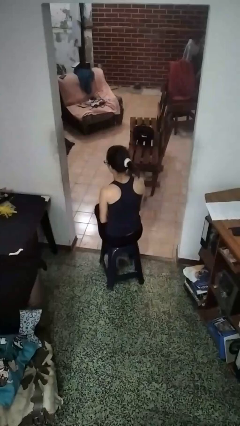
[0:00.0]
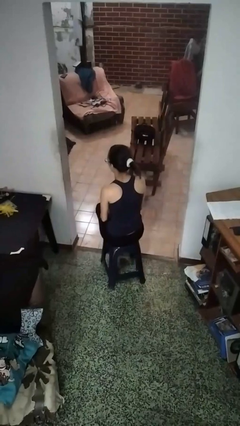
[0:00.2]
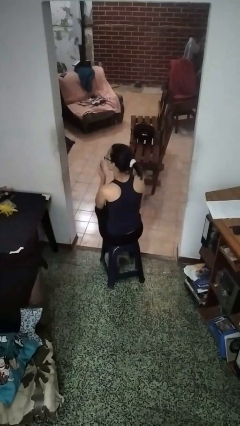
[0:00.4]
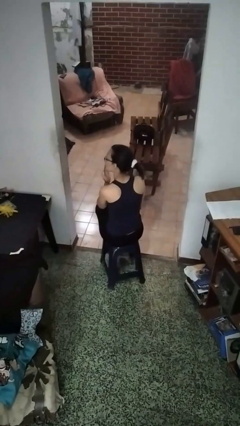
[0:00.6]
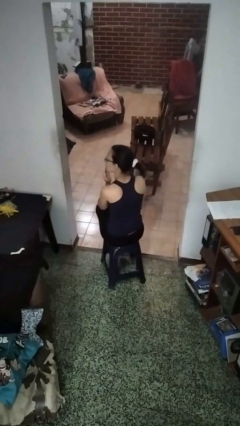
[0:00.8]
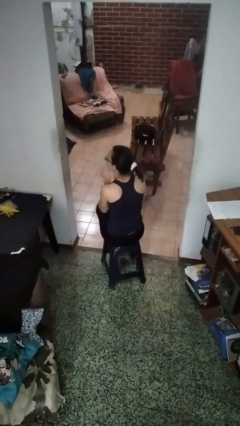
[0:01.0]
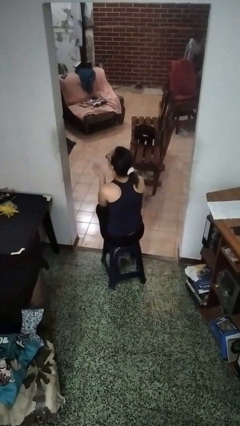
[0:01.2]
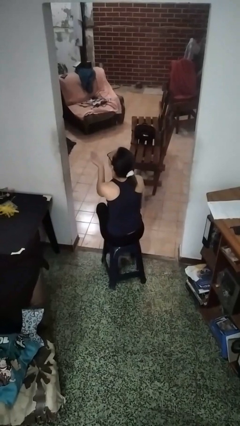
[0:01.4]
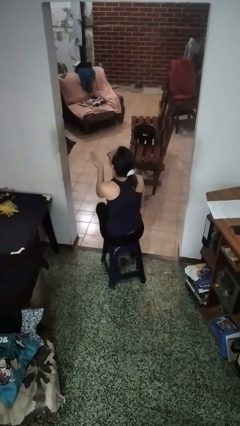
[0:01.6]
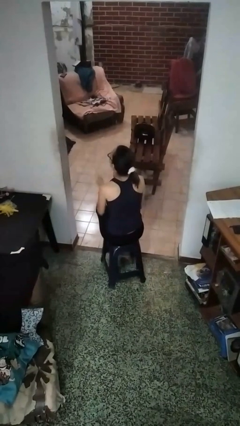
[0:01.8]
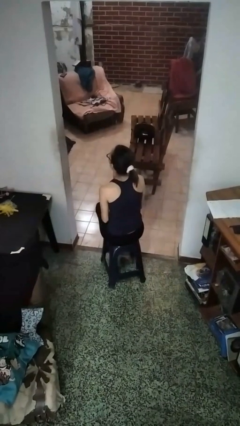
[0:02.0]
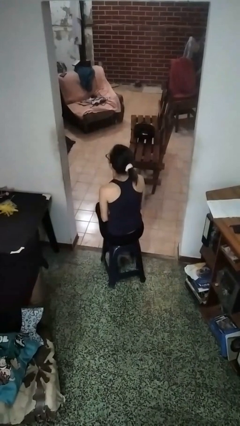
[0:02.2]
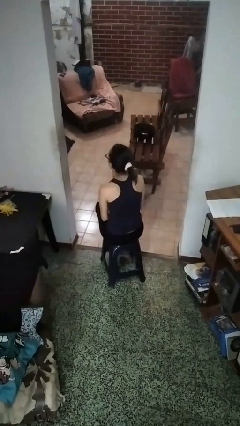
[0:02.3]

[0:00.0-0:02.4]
person gestures blow kiss

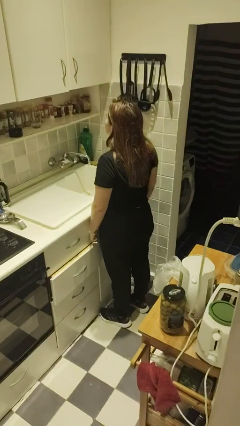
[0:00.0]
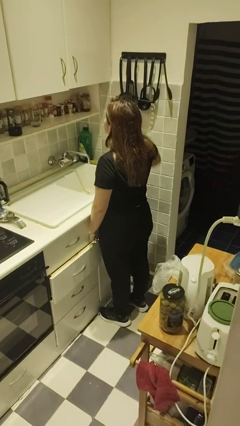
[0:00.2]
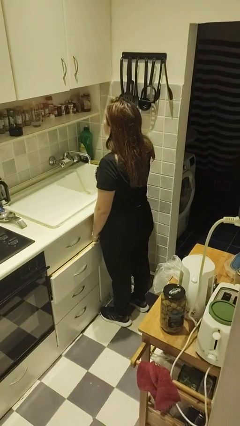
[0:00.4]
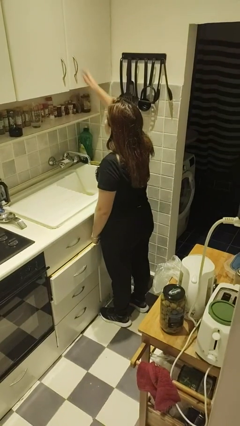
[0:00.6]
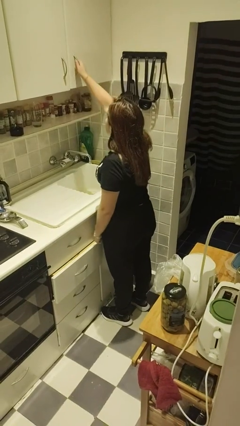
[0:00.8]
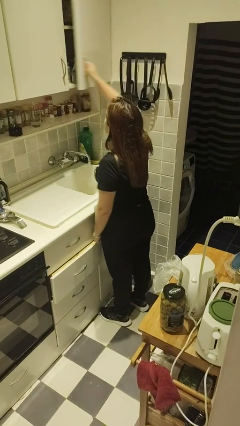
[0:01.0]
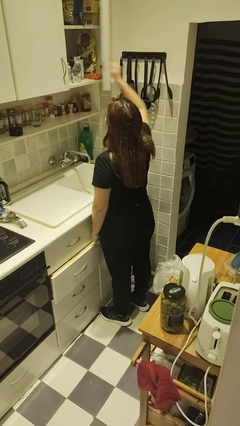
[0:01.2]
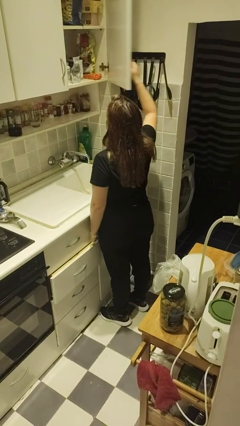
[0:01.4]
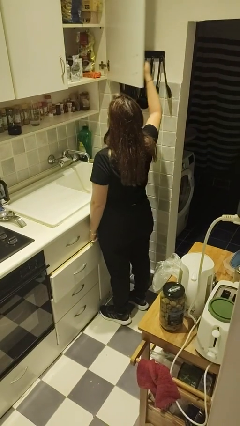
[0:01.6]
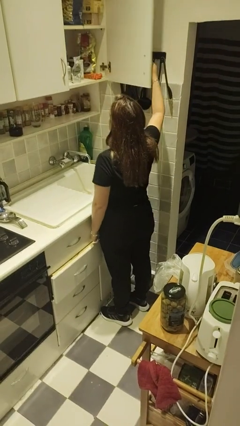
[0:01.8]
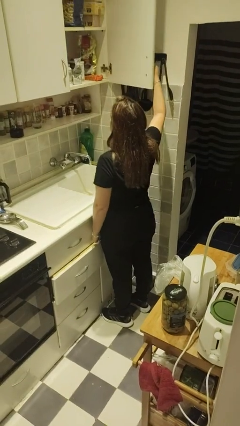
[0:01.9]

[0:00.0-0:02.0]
person opens cabinet

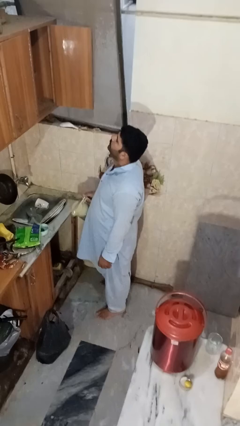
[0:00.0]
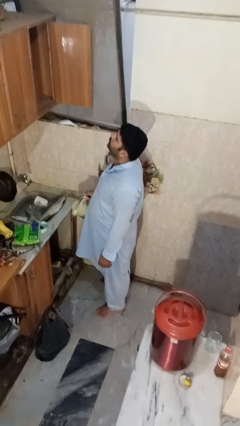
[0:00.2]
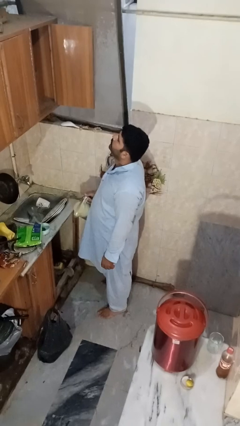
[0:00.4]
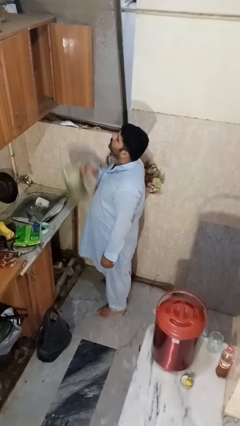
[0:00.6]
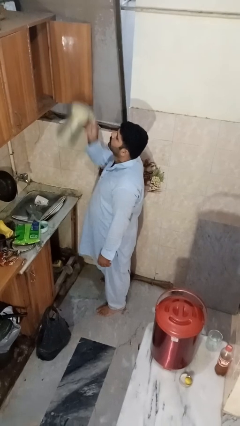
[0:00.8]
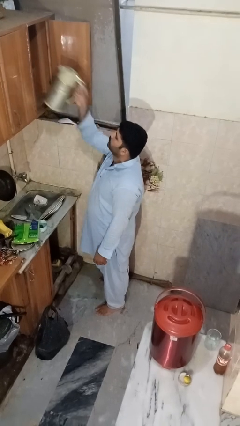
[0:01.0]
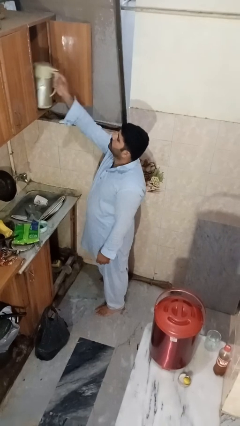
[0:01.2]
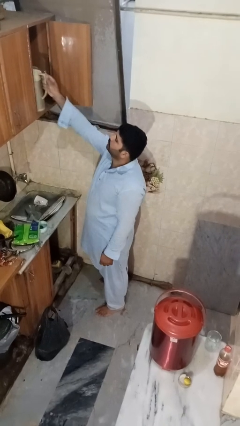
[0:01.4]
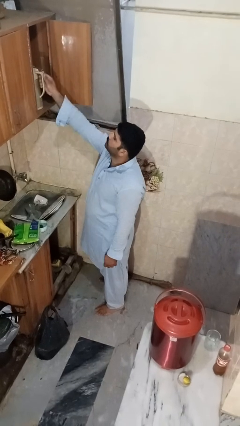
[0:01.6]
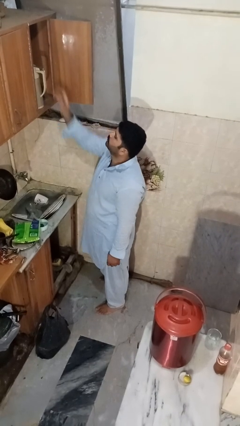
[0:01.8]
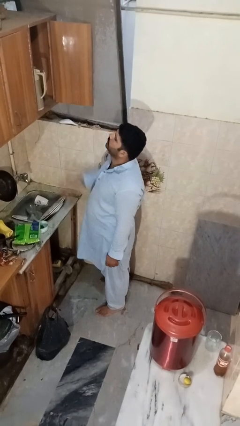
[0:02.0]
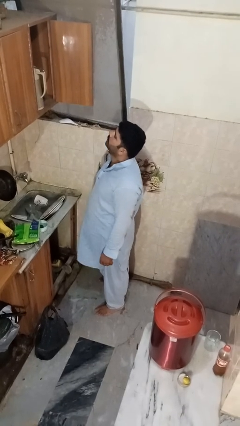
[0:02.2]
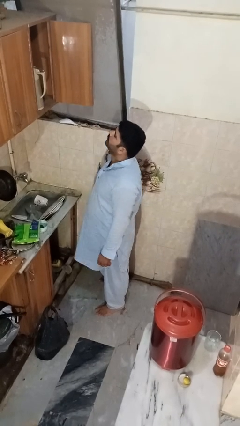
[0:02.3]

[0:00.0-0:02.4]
person puts object in cabinet

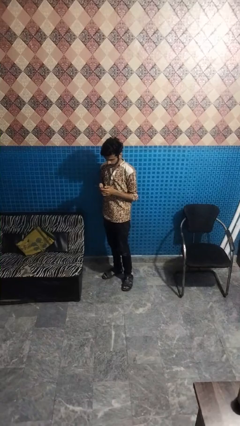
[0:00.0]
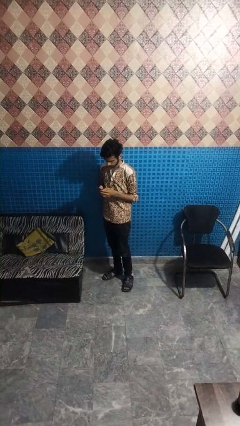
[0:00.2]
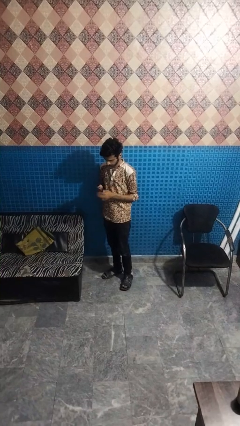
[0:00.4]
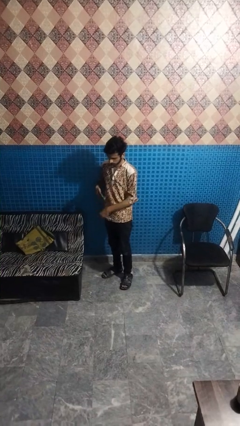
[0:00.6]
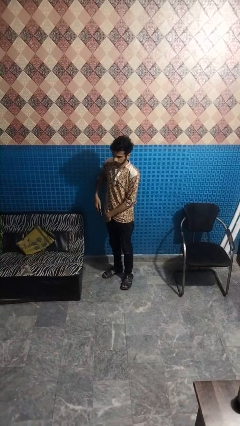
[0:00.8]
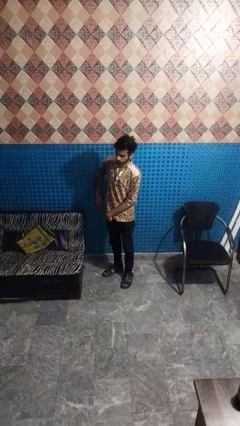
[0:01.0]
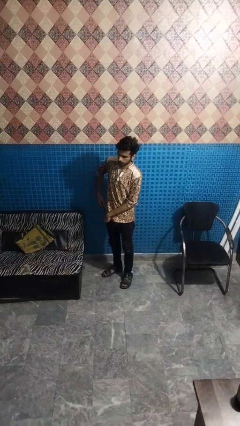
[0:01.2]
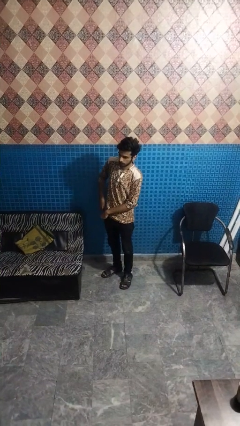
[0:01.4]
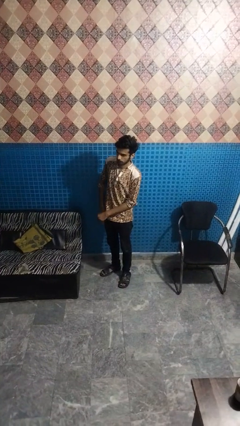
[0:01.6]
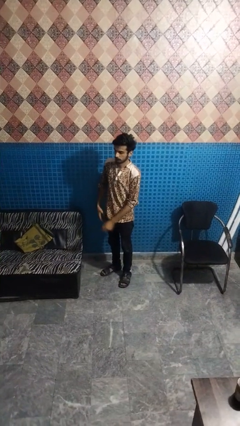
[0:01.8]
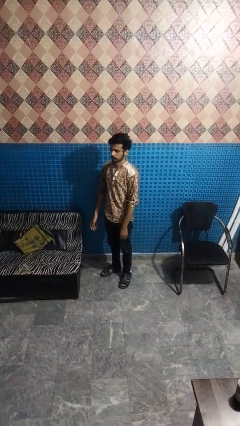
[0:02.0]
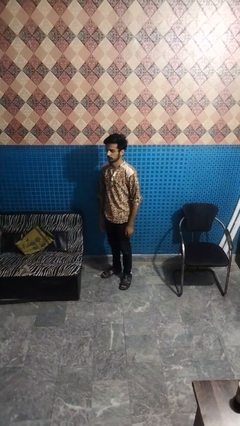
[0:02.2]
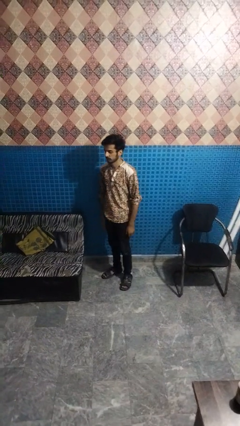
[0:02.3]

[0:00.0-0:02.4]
person puts phone into pocket

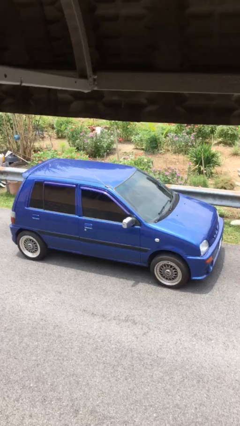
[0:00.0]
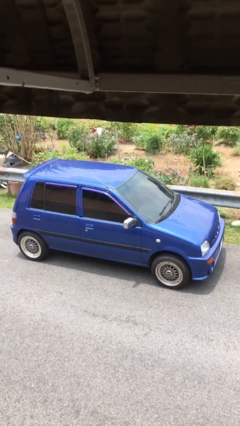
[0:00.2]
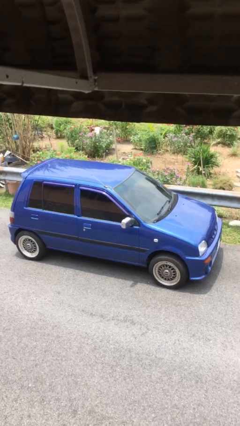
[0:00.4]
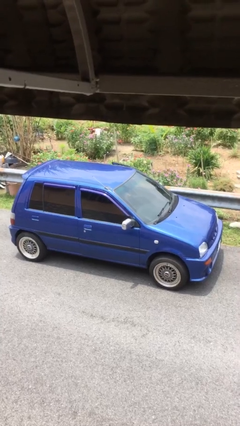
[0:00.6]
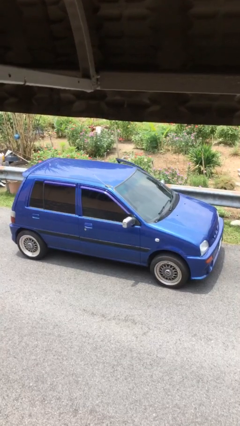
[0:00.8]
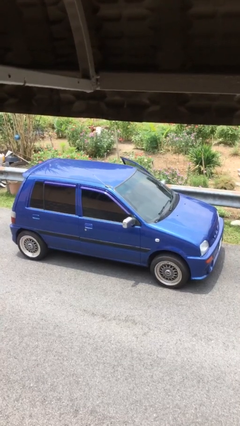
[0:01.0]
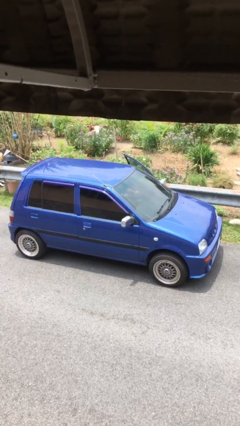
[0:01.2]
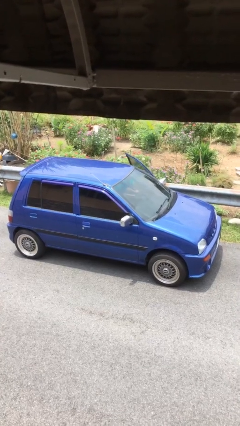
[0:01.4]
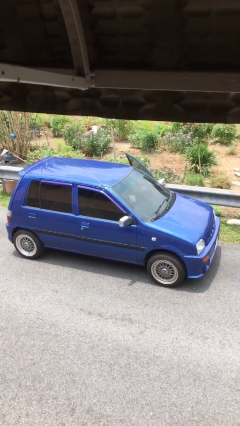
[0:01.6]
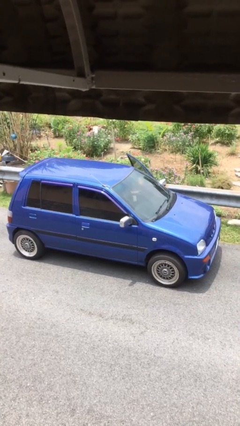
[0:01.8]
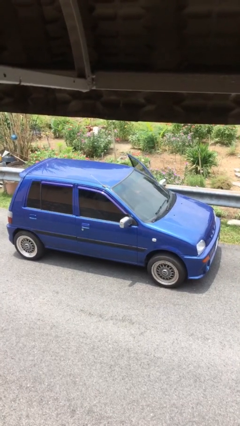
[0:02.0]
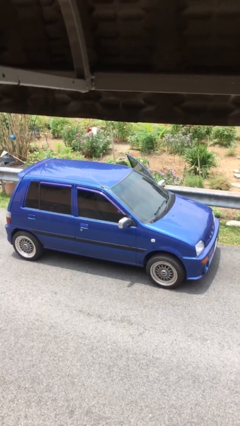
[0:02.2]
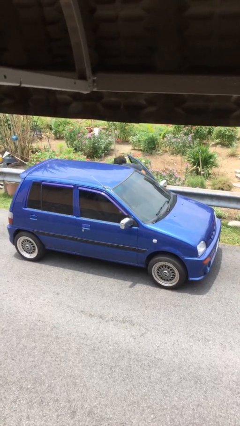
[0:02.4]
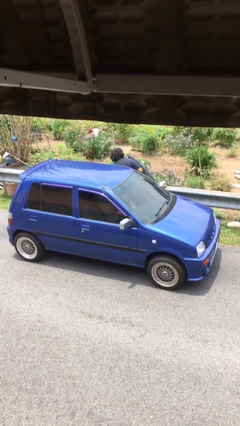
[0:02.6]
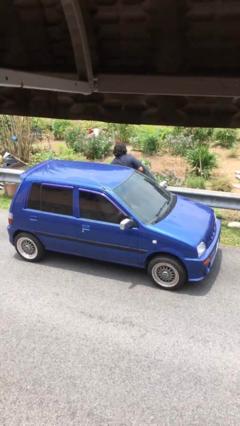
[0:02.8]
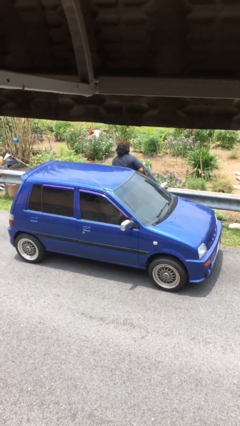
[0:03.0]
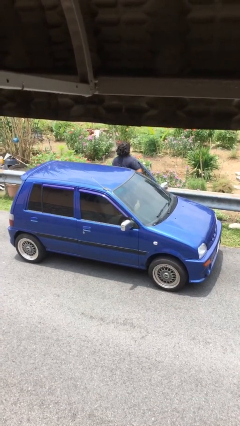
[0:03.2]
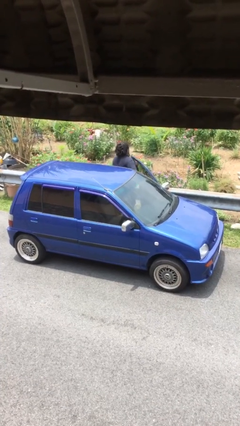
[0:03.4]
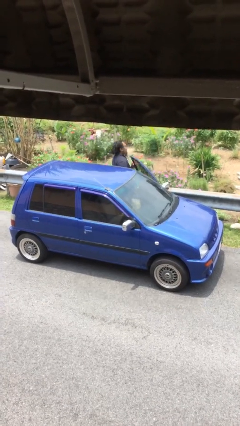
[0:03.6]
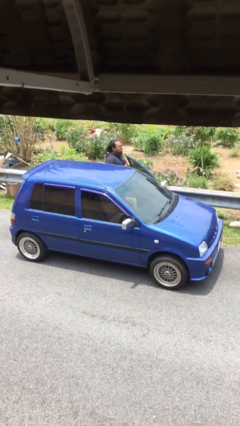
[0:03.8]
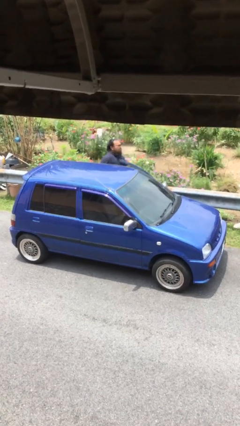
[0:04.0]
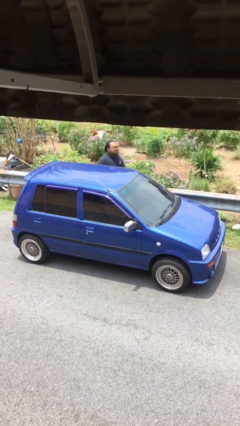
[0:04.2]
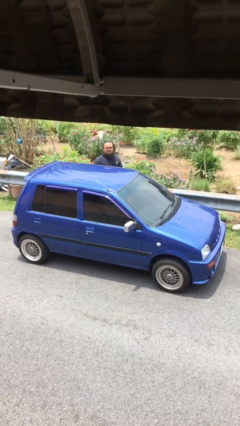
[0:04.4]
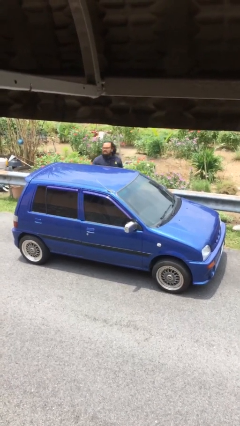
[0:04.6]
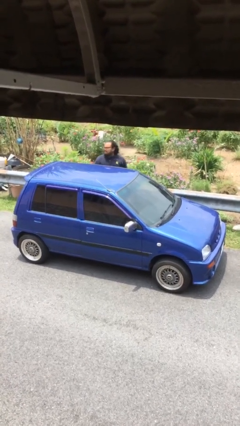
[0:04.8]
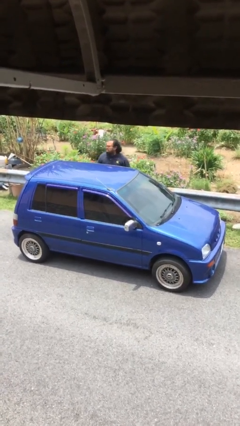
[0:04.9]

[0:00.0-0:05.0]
car drops off person

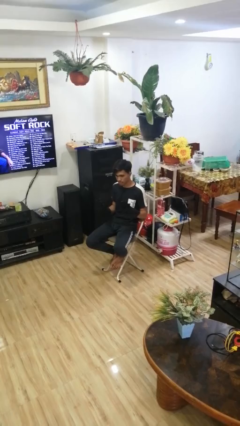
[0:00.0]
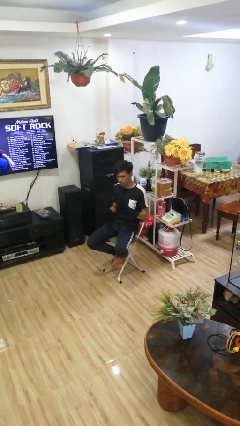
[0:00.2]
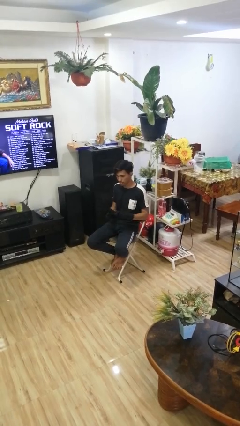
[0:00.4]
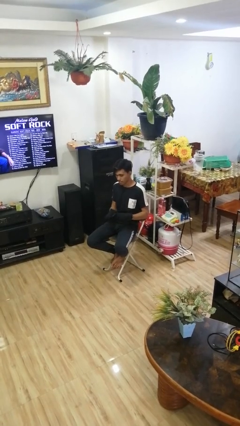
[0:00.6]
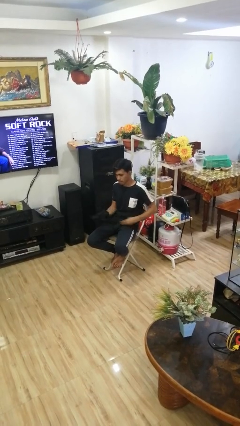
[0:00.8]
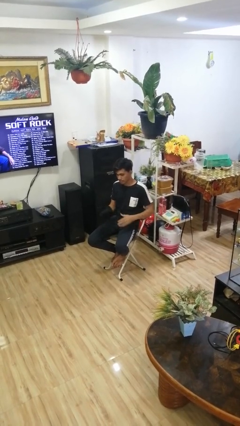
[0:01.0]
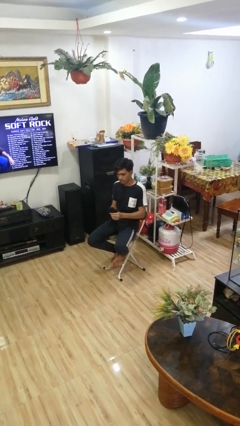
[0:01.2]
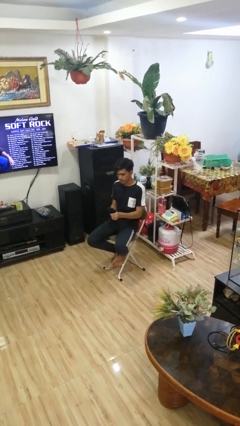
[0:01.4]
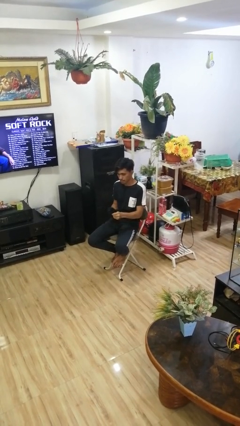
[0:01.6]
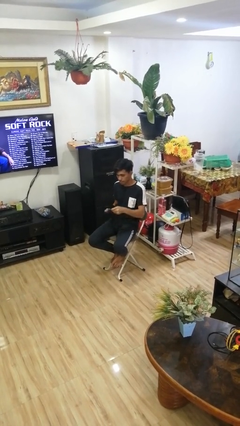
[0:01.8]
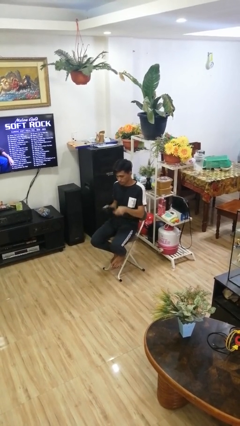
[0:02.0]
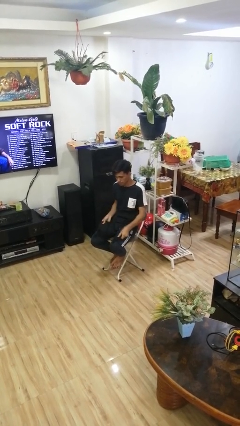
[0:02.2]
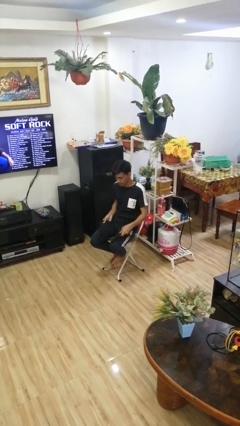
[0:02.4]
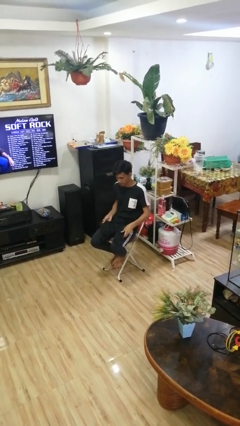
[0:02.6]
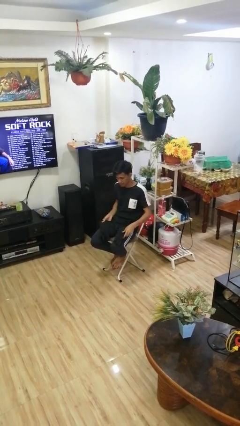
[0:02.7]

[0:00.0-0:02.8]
person takes off gloves

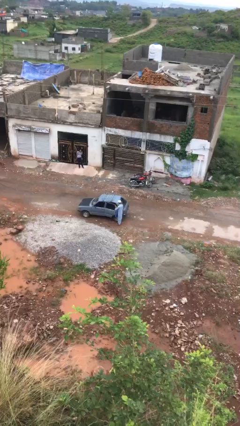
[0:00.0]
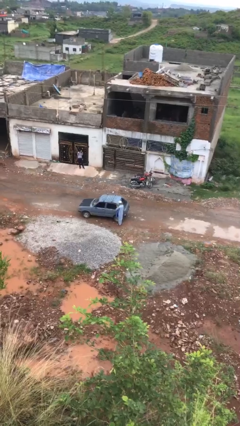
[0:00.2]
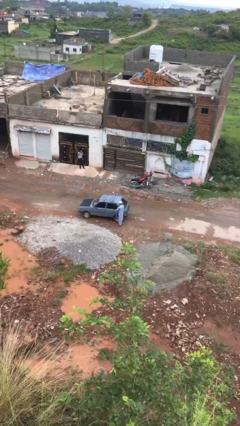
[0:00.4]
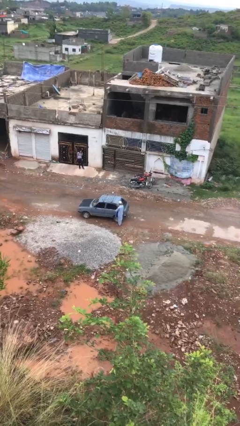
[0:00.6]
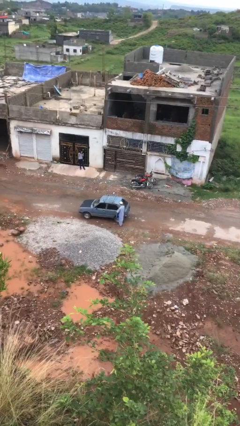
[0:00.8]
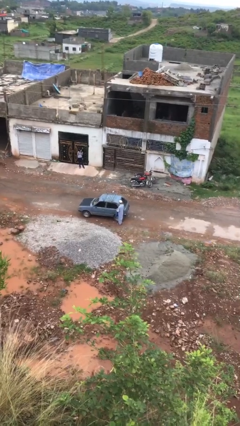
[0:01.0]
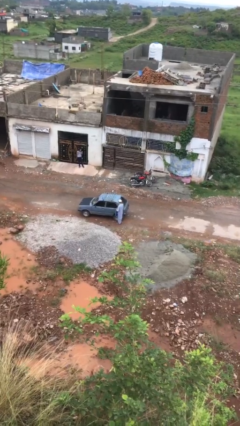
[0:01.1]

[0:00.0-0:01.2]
person closes car door
